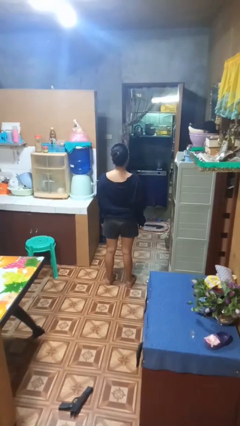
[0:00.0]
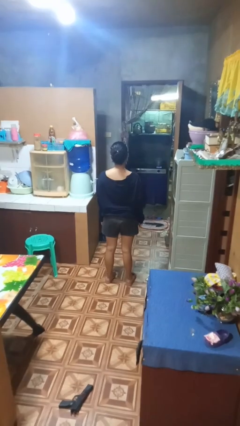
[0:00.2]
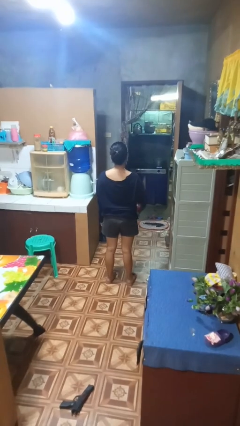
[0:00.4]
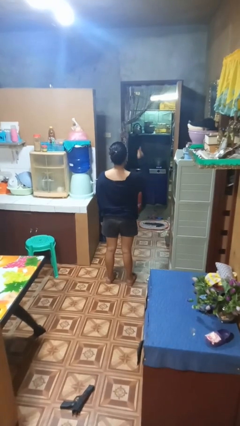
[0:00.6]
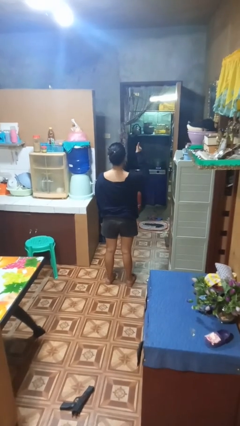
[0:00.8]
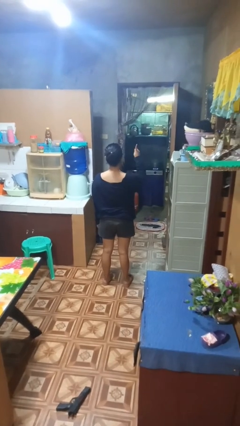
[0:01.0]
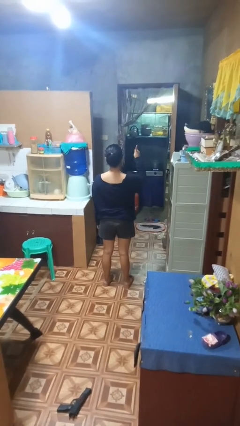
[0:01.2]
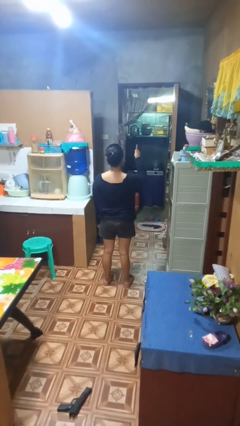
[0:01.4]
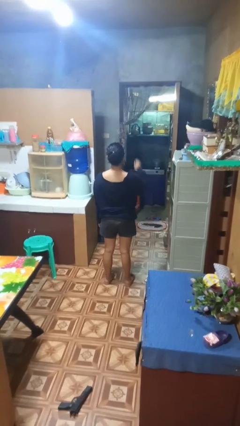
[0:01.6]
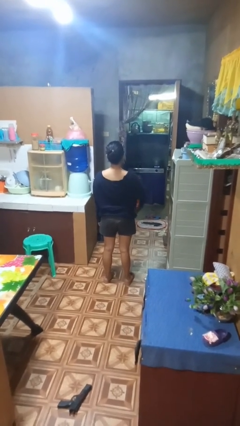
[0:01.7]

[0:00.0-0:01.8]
person gestures number one

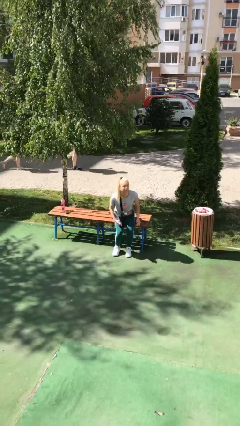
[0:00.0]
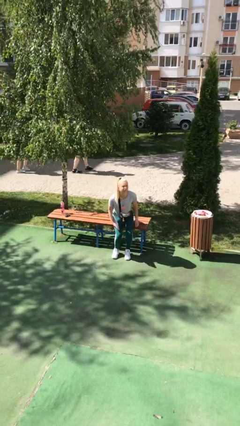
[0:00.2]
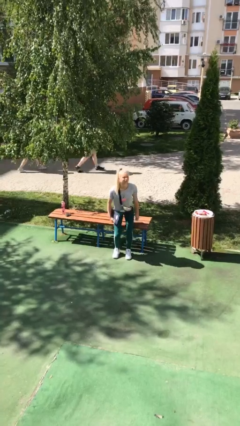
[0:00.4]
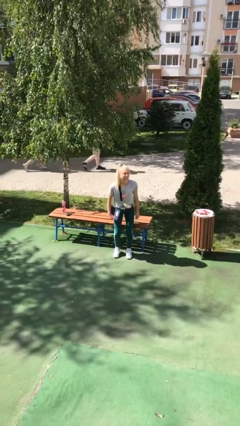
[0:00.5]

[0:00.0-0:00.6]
person stands up

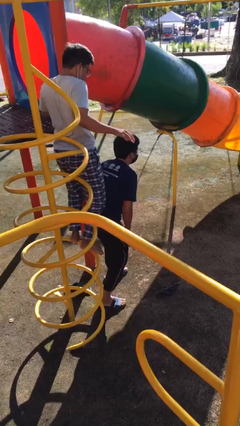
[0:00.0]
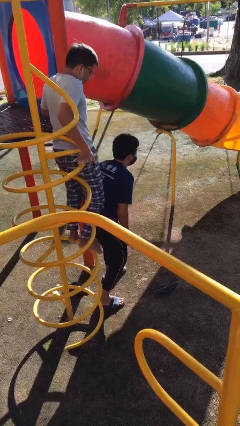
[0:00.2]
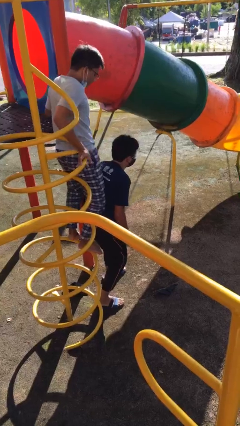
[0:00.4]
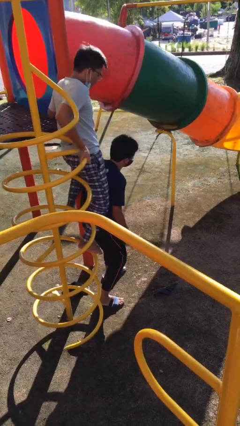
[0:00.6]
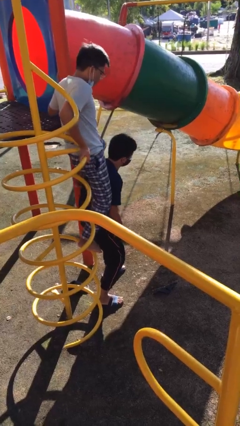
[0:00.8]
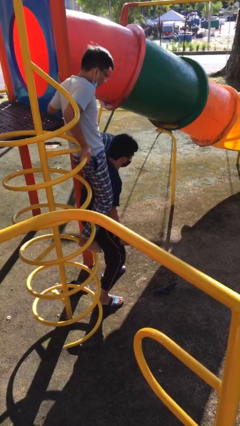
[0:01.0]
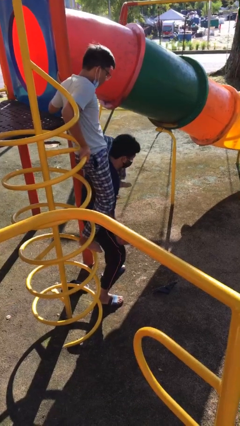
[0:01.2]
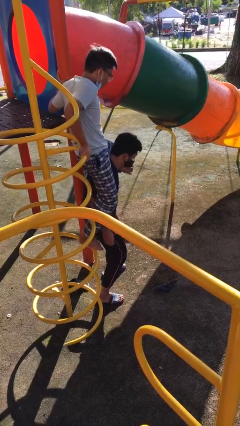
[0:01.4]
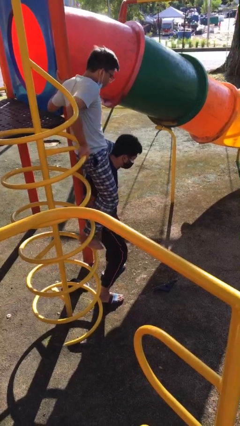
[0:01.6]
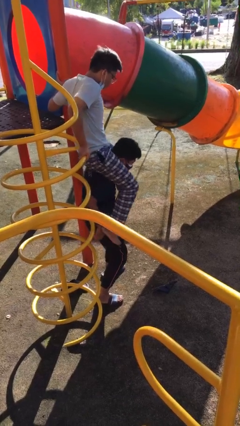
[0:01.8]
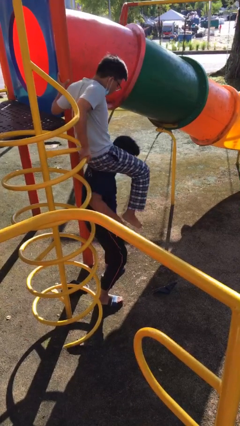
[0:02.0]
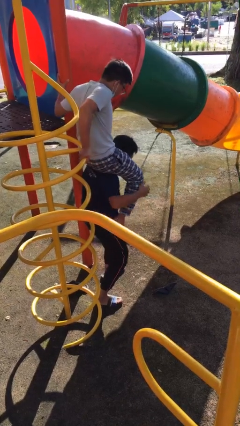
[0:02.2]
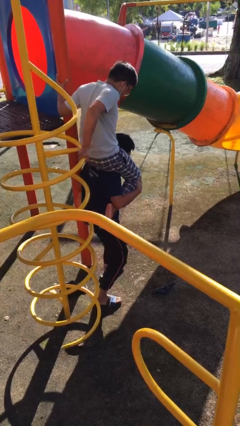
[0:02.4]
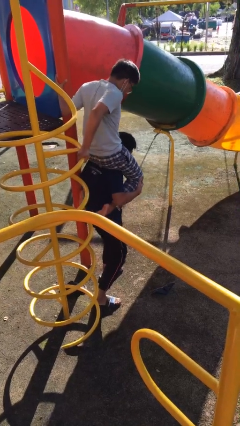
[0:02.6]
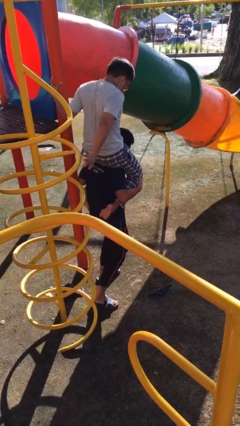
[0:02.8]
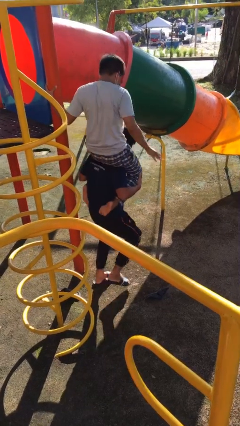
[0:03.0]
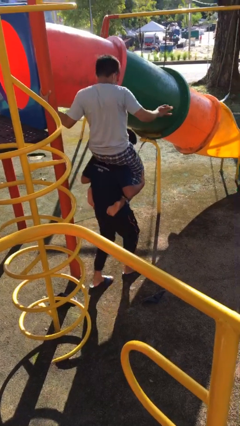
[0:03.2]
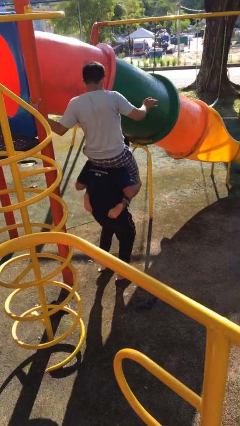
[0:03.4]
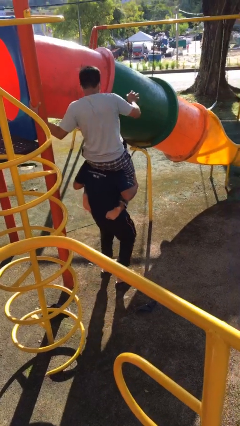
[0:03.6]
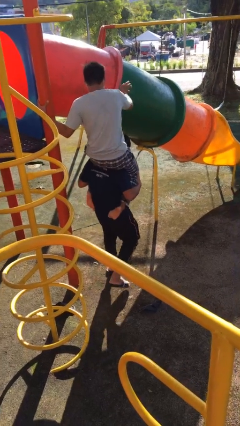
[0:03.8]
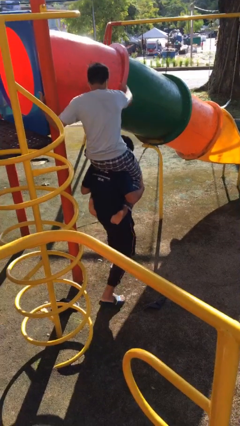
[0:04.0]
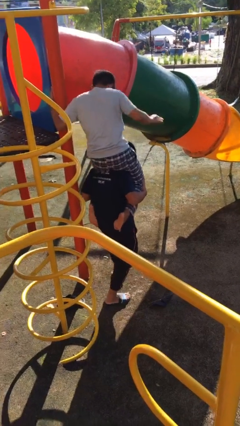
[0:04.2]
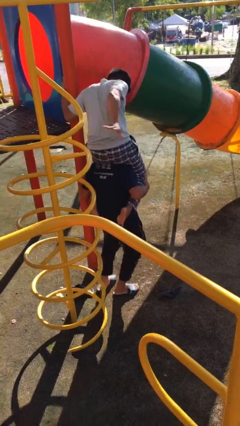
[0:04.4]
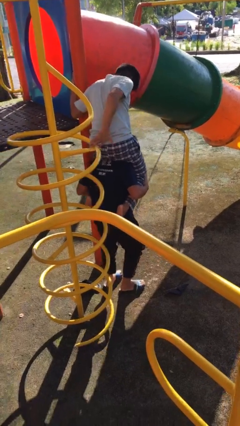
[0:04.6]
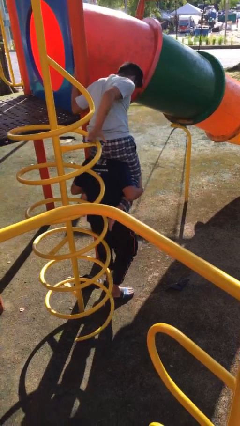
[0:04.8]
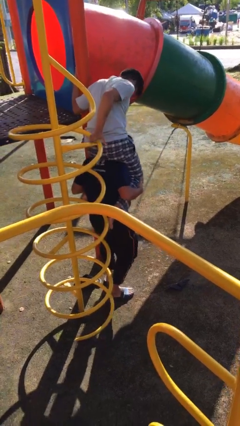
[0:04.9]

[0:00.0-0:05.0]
person carries person on shoulders

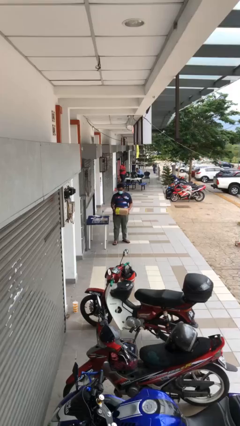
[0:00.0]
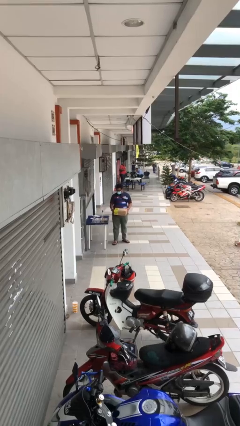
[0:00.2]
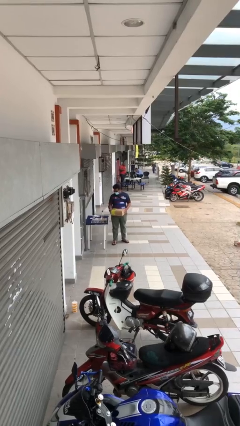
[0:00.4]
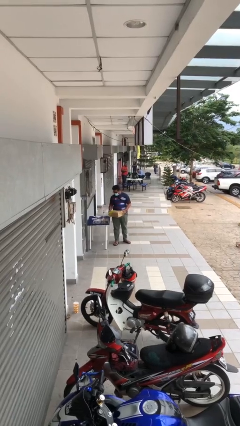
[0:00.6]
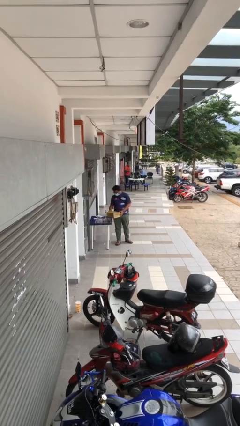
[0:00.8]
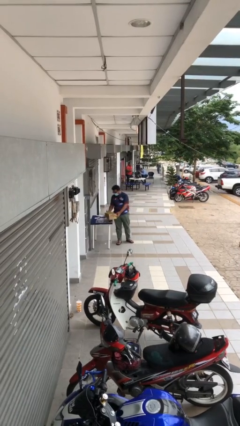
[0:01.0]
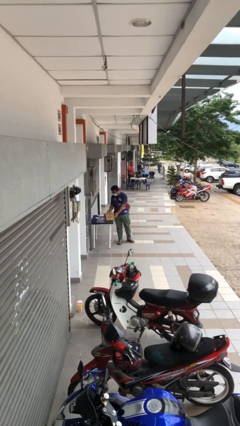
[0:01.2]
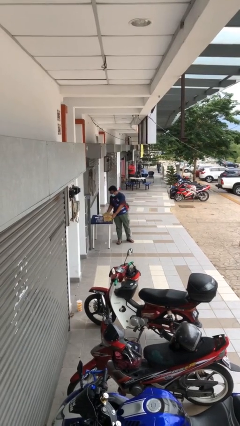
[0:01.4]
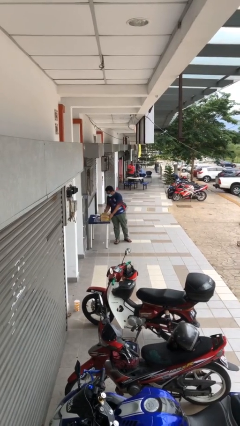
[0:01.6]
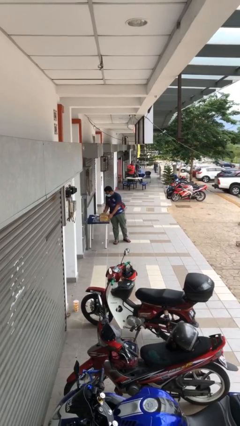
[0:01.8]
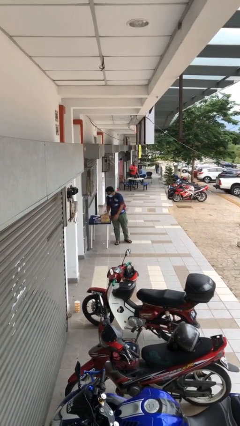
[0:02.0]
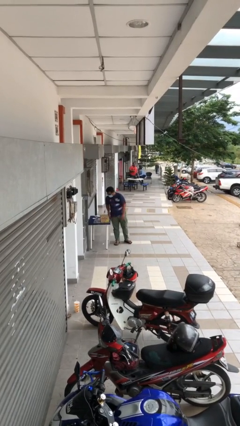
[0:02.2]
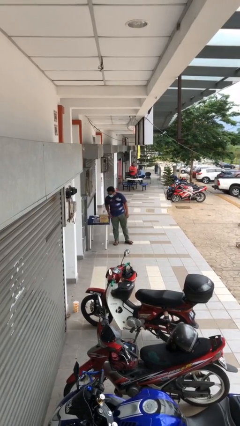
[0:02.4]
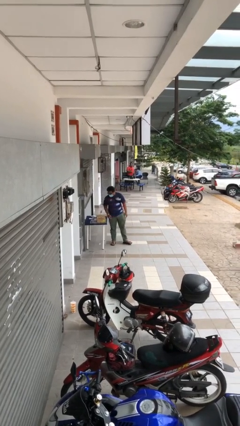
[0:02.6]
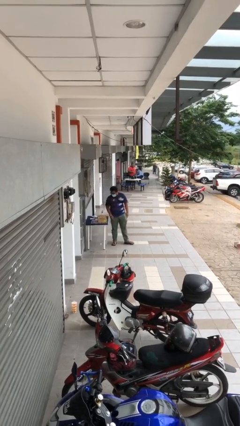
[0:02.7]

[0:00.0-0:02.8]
person puts down object on table

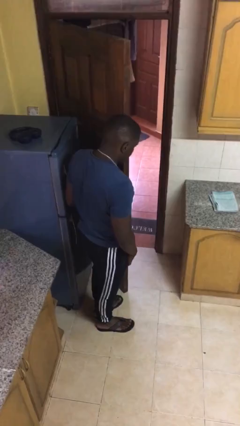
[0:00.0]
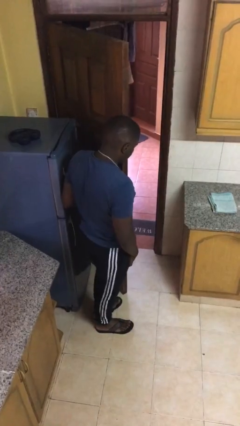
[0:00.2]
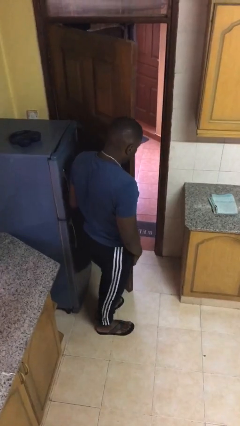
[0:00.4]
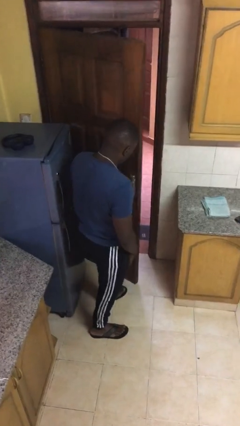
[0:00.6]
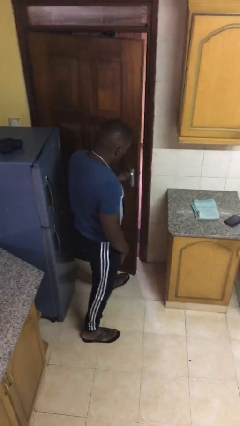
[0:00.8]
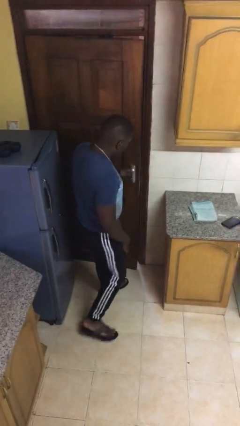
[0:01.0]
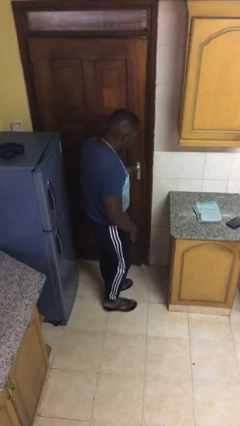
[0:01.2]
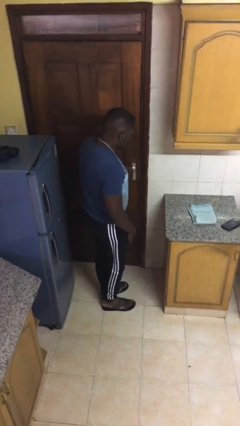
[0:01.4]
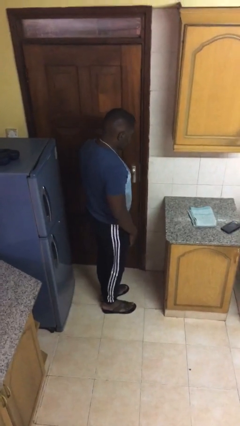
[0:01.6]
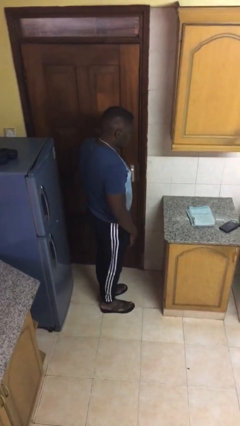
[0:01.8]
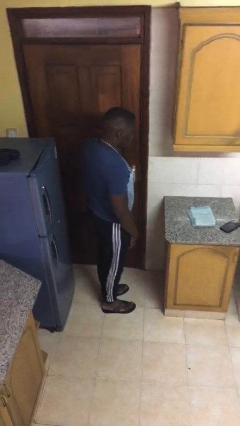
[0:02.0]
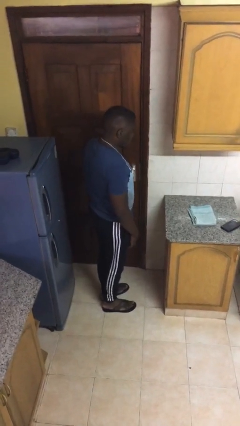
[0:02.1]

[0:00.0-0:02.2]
person closes facility door

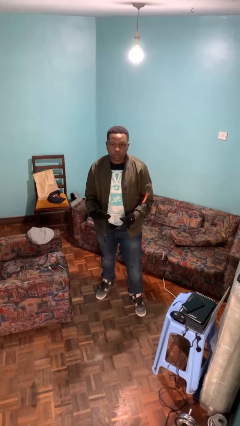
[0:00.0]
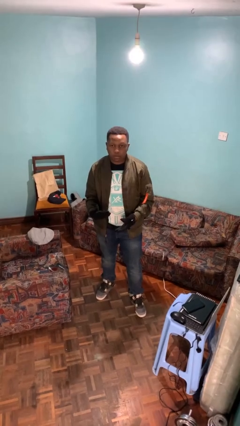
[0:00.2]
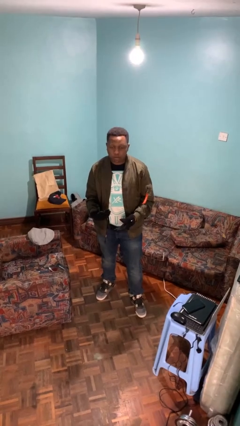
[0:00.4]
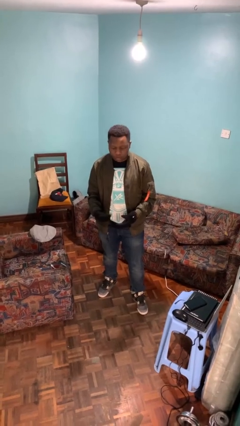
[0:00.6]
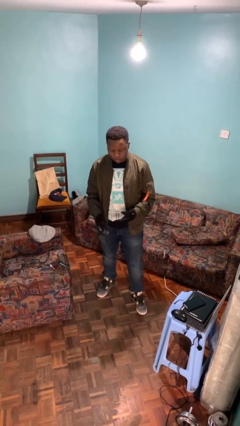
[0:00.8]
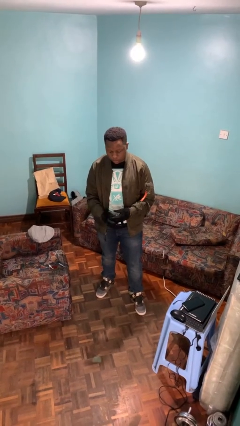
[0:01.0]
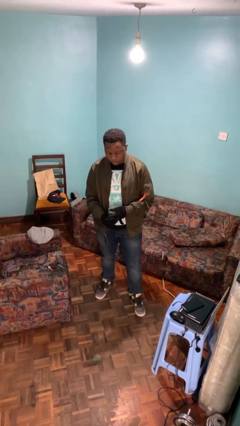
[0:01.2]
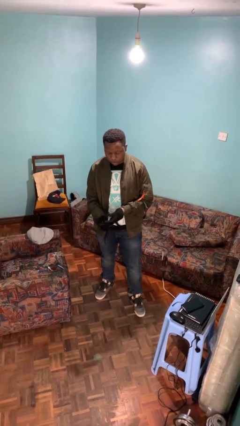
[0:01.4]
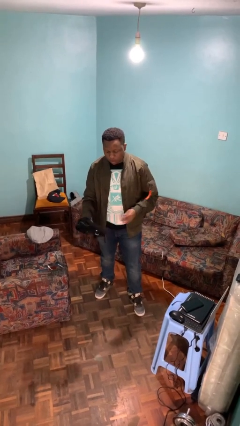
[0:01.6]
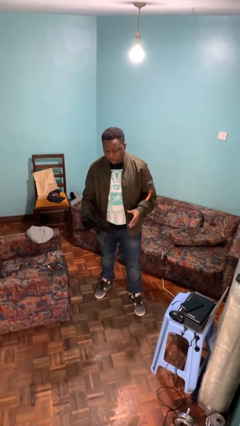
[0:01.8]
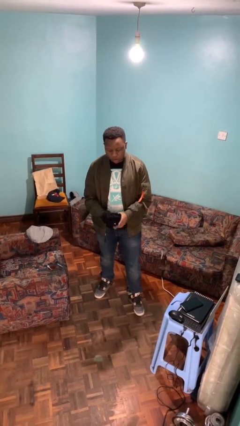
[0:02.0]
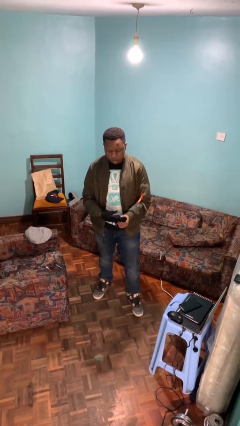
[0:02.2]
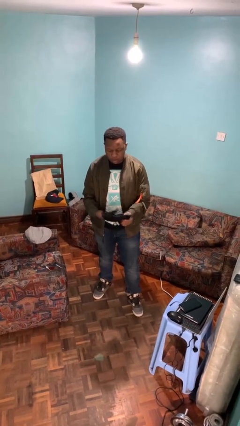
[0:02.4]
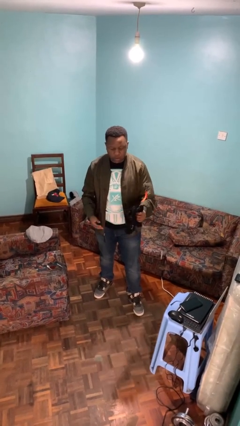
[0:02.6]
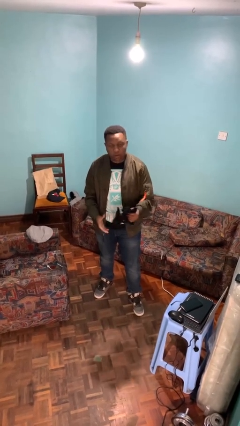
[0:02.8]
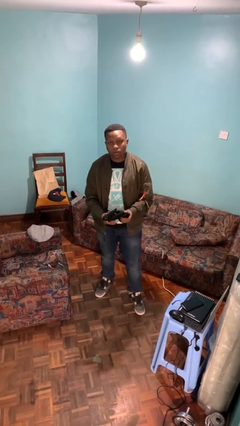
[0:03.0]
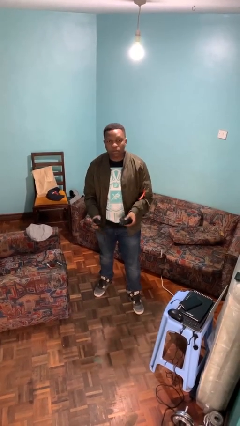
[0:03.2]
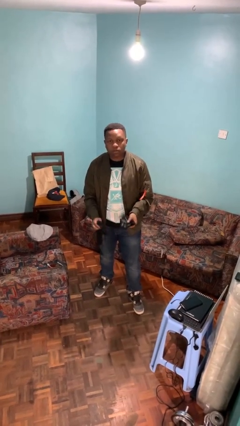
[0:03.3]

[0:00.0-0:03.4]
person takes off gloves

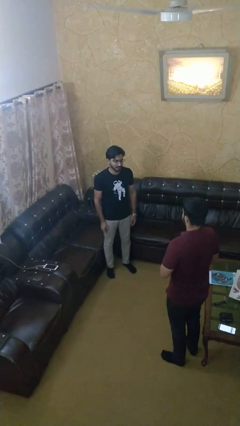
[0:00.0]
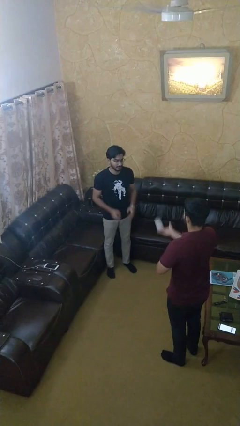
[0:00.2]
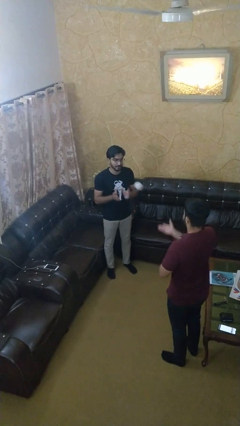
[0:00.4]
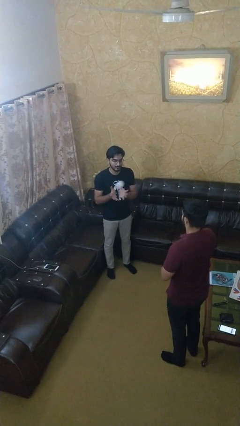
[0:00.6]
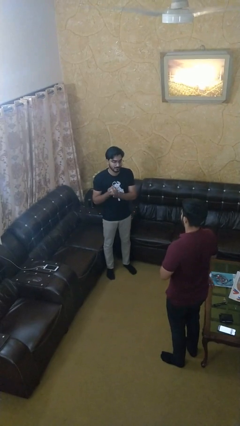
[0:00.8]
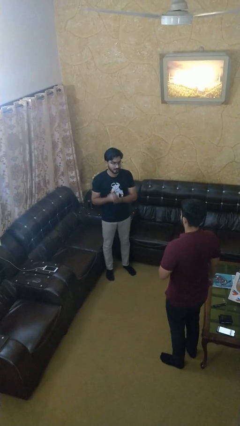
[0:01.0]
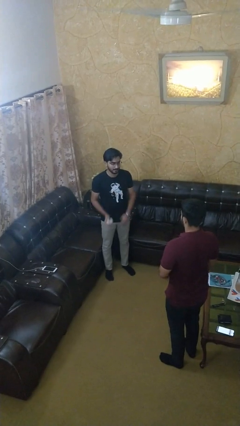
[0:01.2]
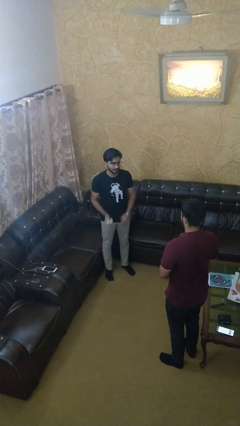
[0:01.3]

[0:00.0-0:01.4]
person catches object from person
